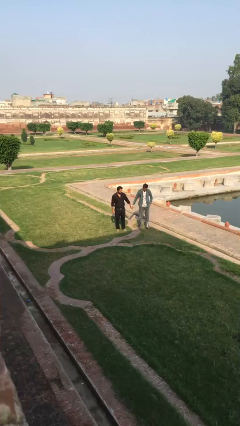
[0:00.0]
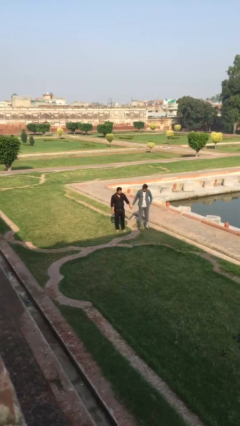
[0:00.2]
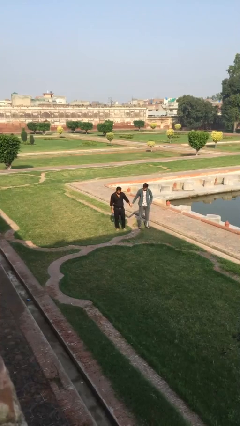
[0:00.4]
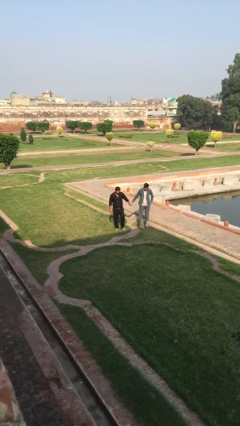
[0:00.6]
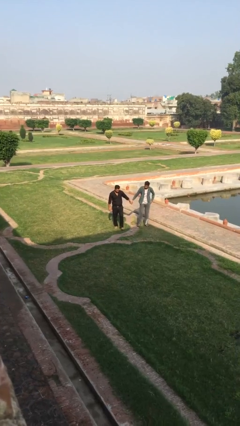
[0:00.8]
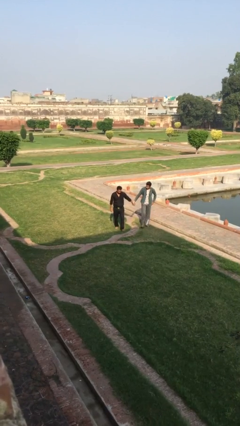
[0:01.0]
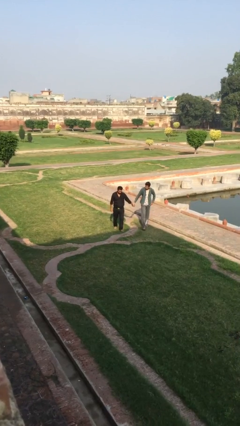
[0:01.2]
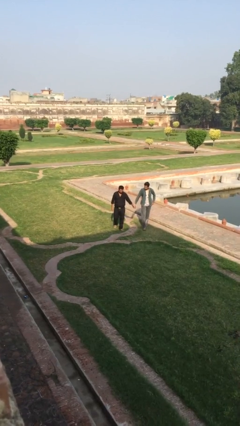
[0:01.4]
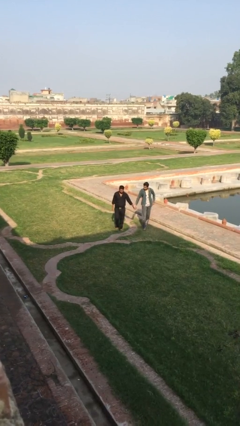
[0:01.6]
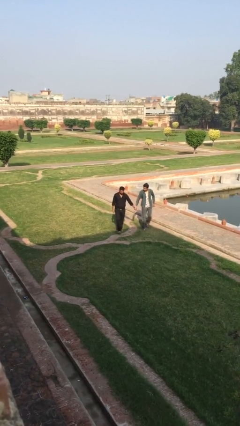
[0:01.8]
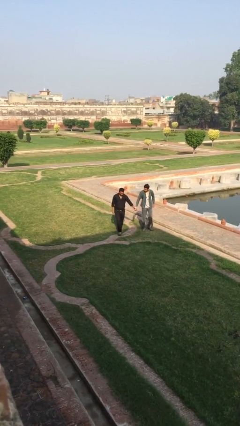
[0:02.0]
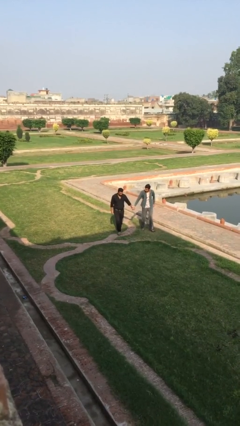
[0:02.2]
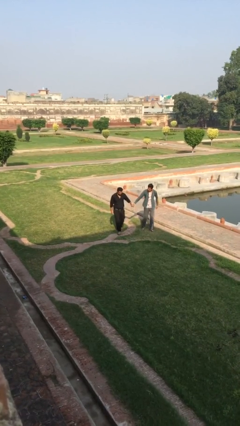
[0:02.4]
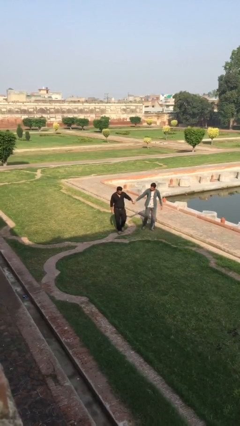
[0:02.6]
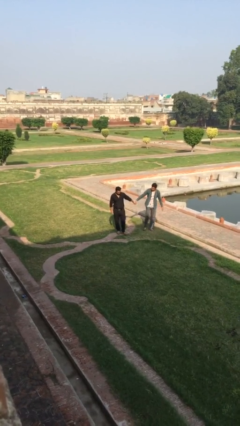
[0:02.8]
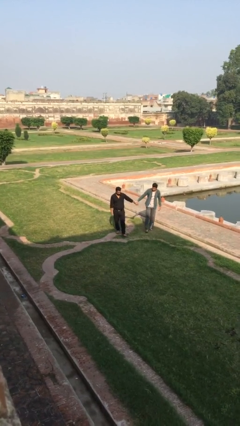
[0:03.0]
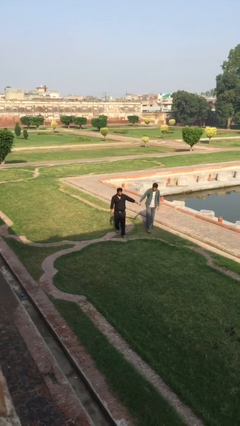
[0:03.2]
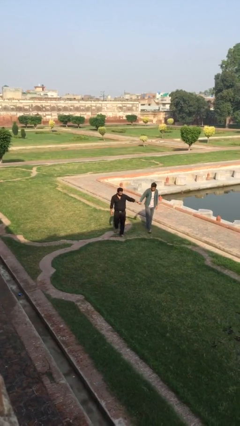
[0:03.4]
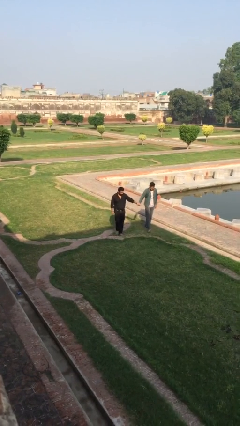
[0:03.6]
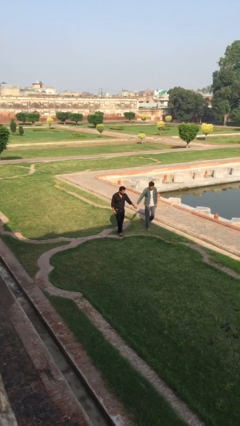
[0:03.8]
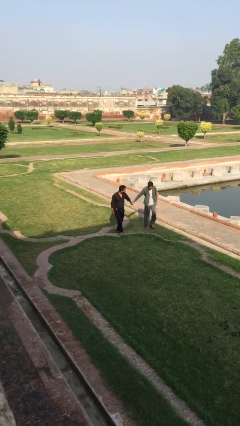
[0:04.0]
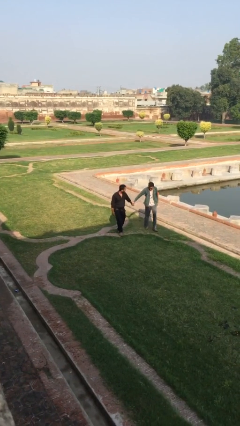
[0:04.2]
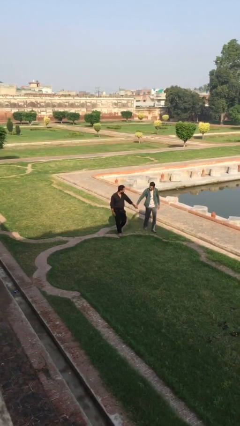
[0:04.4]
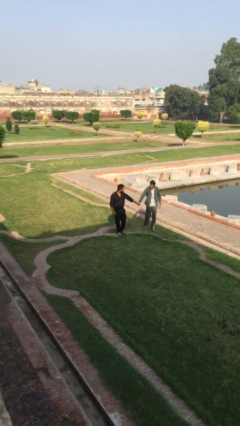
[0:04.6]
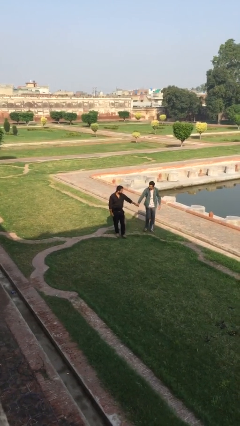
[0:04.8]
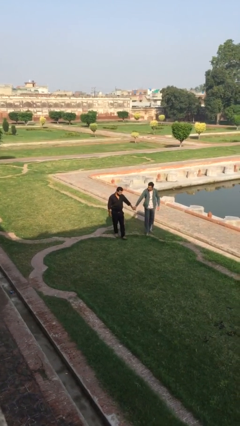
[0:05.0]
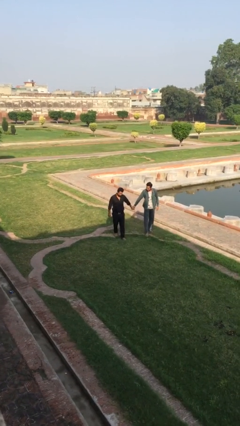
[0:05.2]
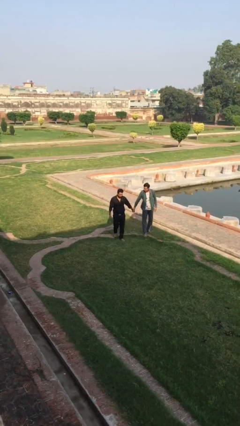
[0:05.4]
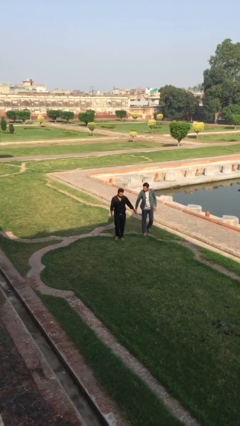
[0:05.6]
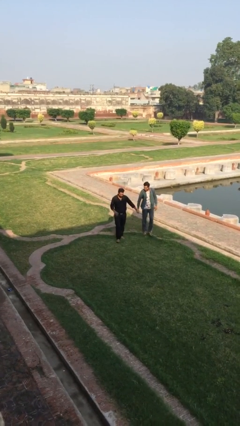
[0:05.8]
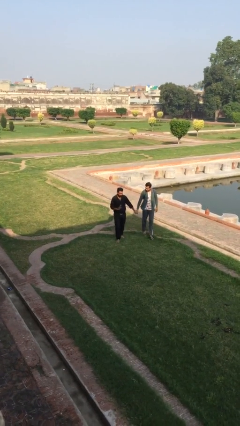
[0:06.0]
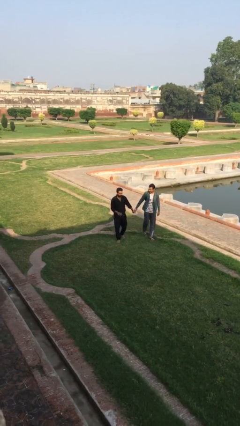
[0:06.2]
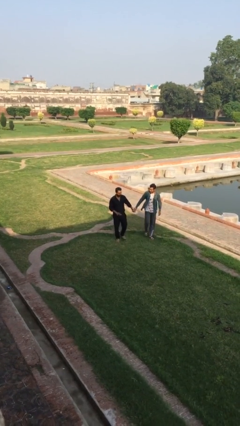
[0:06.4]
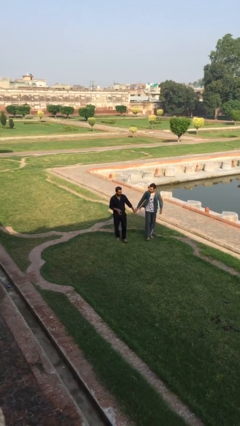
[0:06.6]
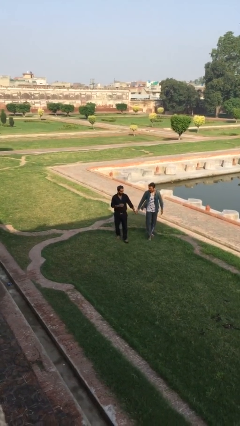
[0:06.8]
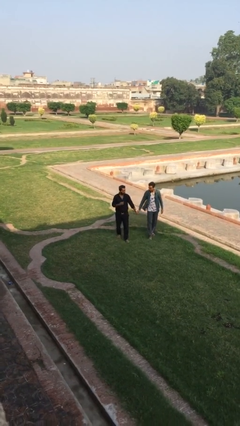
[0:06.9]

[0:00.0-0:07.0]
person holds hand

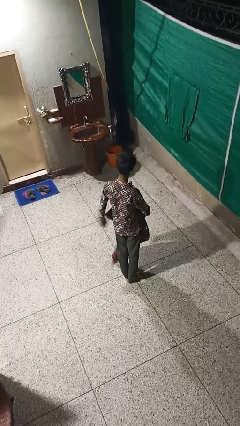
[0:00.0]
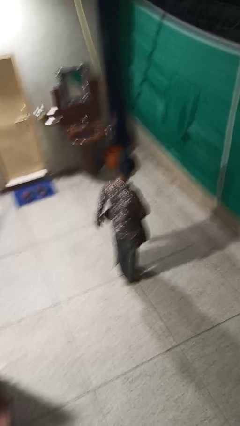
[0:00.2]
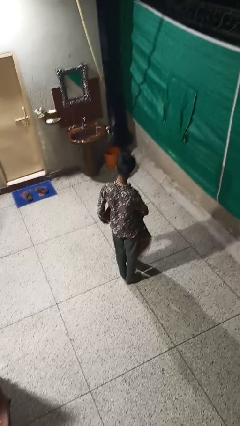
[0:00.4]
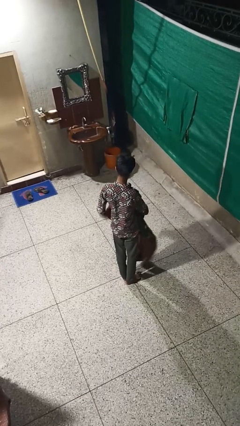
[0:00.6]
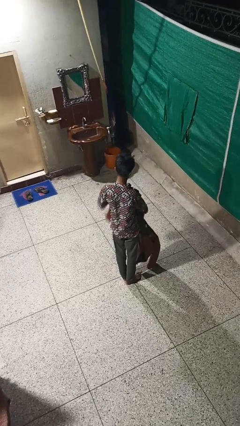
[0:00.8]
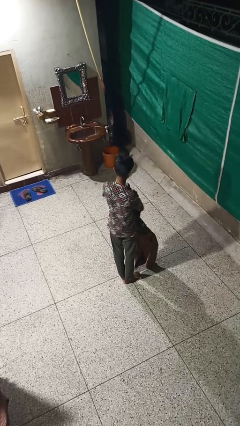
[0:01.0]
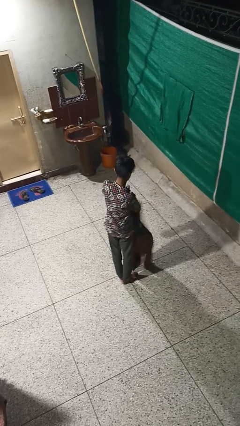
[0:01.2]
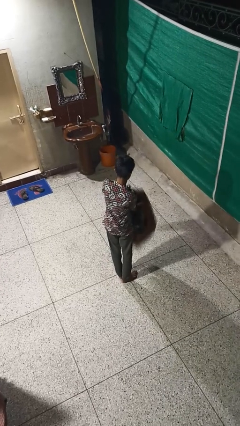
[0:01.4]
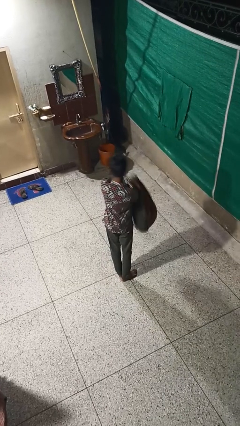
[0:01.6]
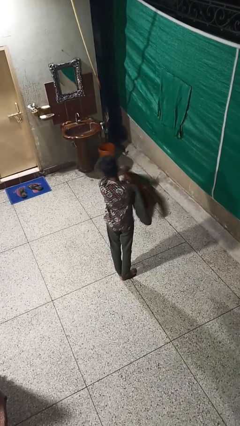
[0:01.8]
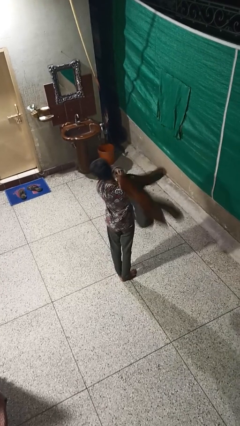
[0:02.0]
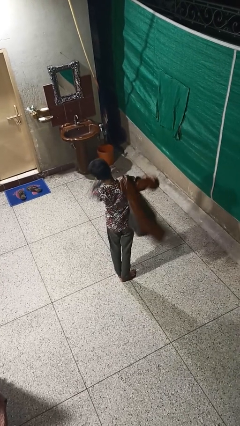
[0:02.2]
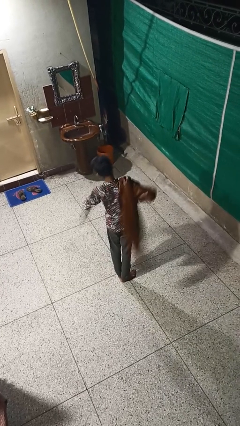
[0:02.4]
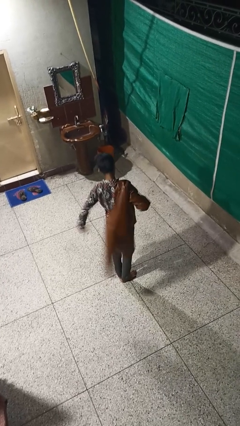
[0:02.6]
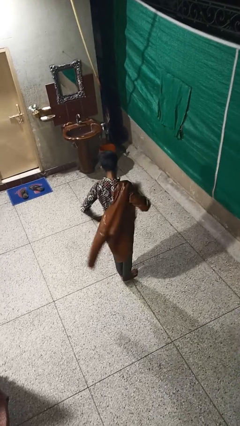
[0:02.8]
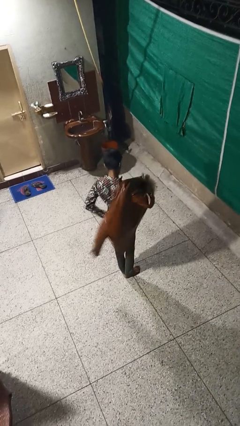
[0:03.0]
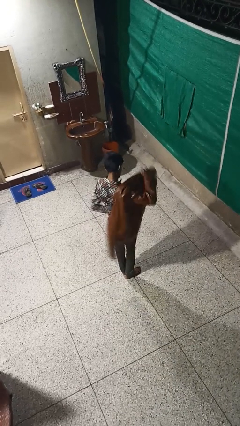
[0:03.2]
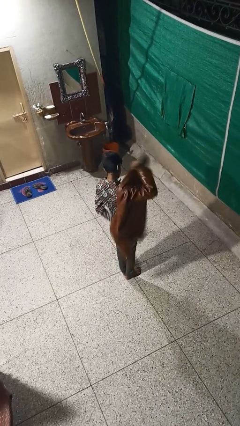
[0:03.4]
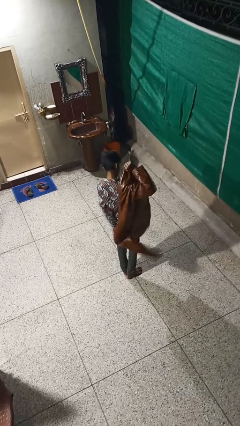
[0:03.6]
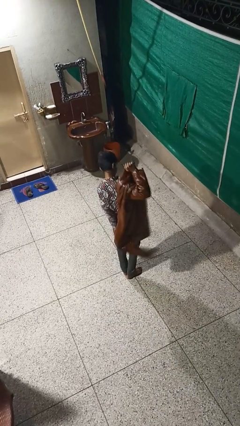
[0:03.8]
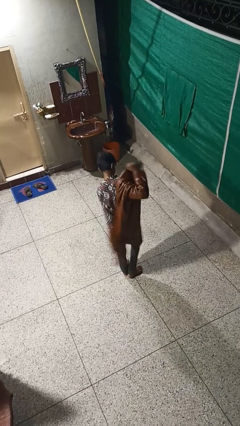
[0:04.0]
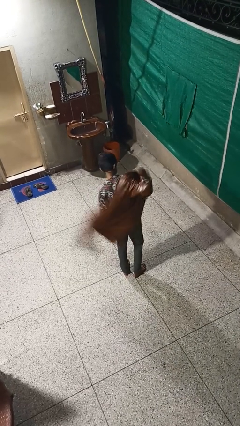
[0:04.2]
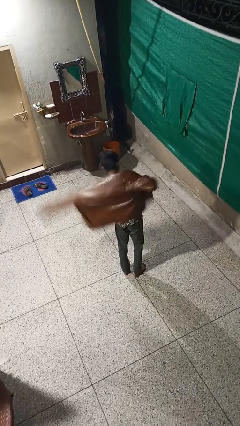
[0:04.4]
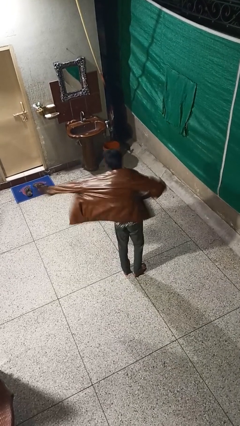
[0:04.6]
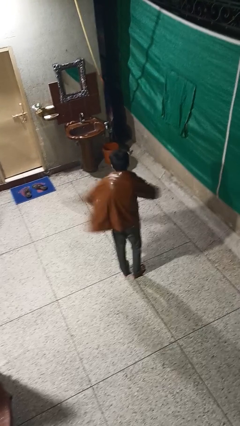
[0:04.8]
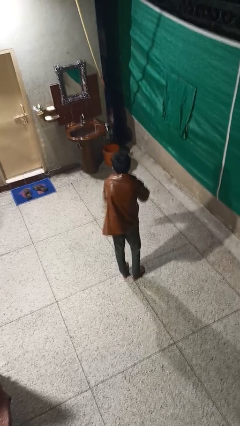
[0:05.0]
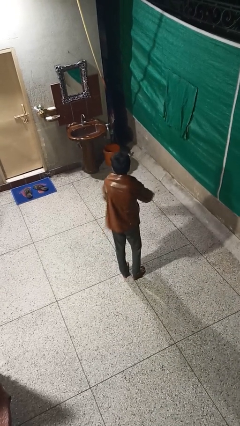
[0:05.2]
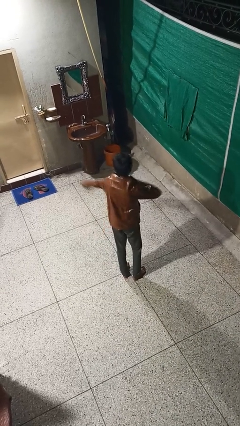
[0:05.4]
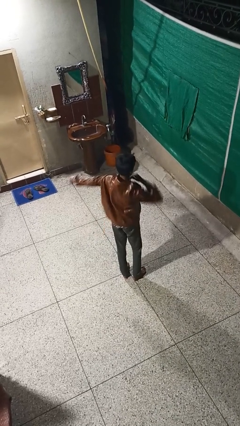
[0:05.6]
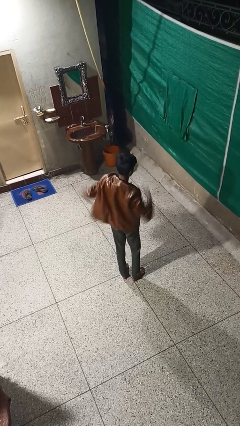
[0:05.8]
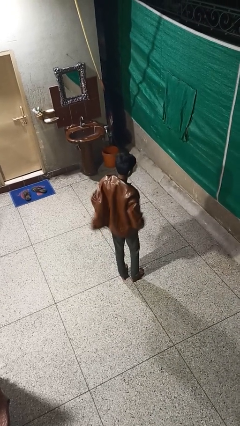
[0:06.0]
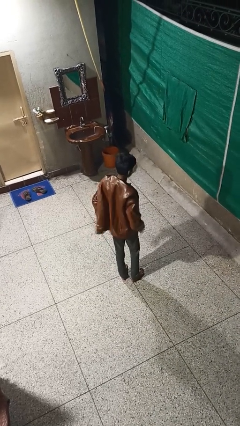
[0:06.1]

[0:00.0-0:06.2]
person puts on jacket

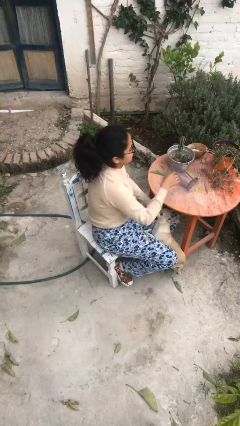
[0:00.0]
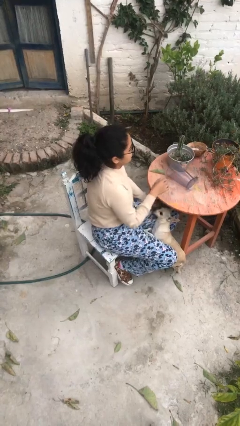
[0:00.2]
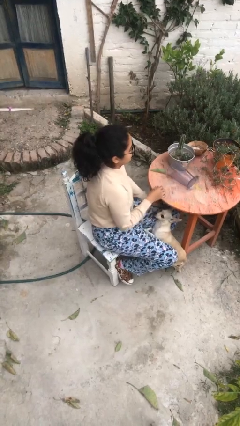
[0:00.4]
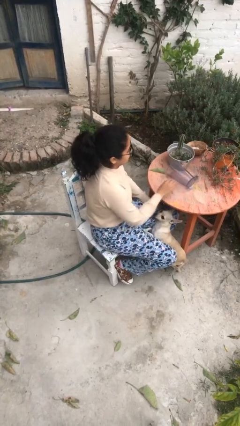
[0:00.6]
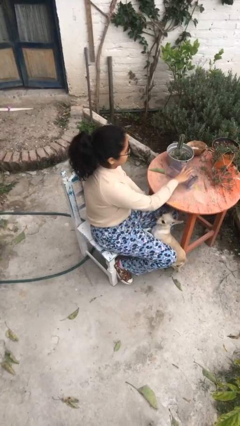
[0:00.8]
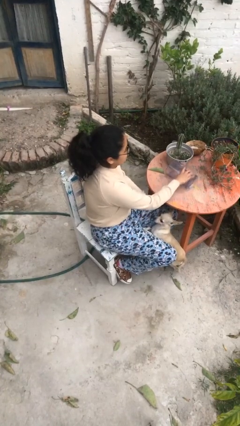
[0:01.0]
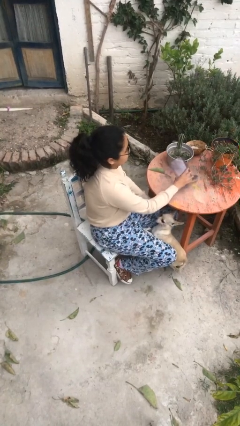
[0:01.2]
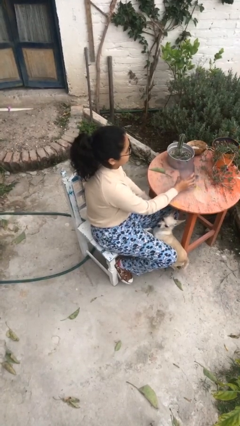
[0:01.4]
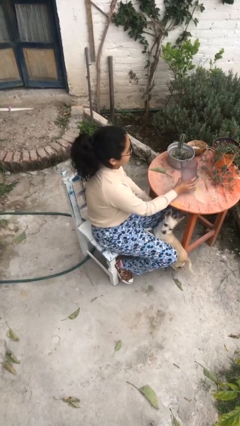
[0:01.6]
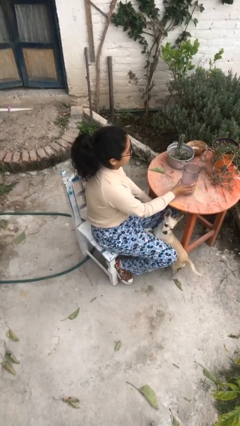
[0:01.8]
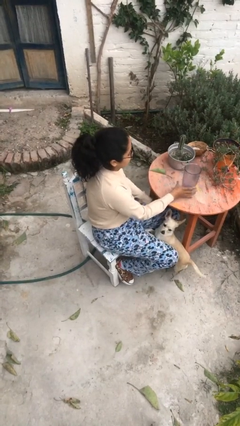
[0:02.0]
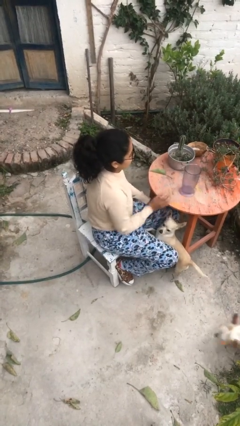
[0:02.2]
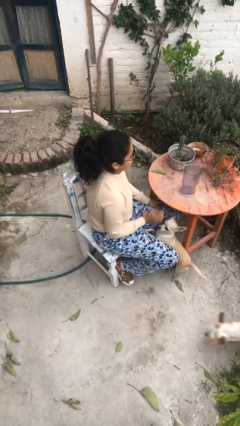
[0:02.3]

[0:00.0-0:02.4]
person sets upright glass

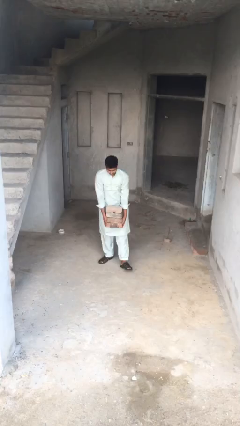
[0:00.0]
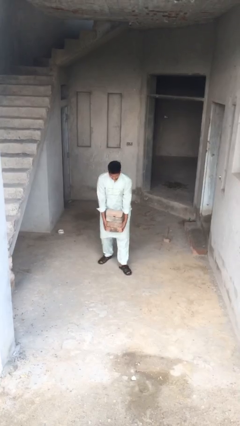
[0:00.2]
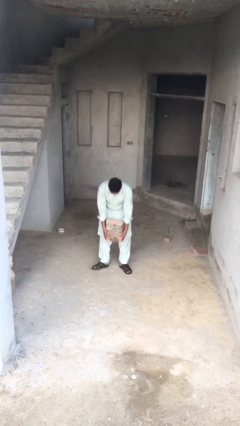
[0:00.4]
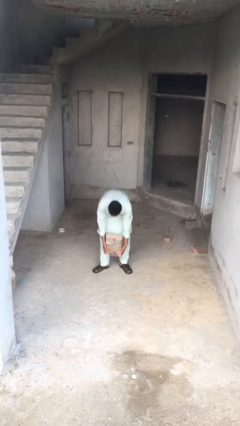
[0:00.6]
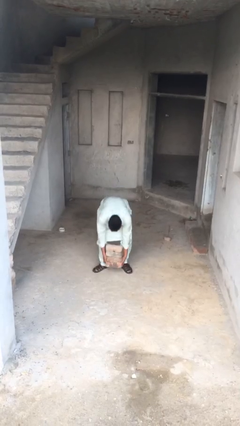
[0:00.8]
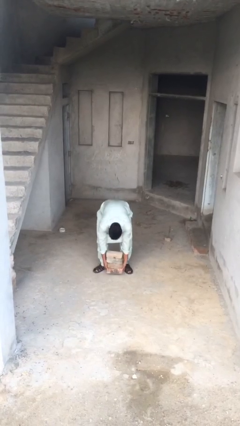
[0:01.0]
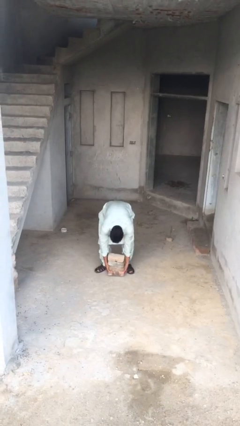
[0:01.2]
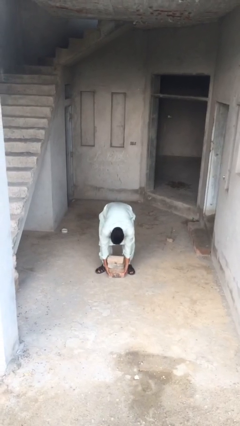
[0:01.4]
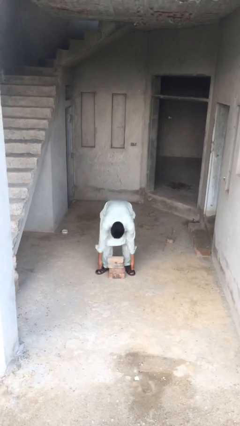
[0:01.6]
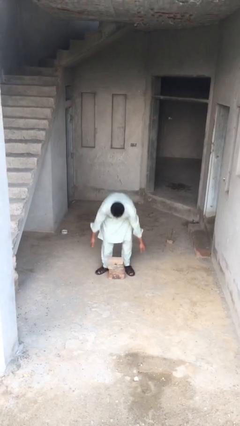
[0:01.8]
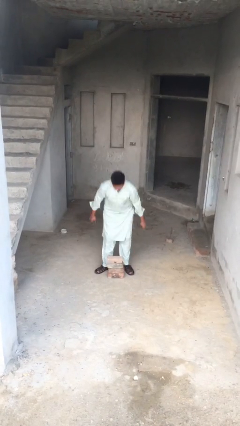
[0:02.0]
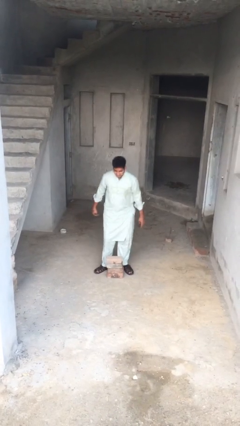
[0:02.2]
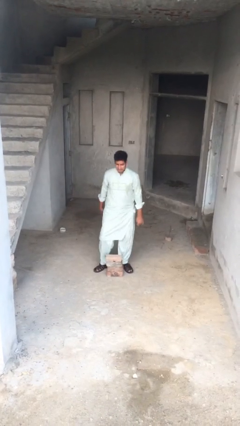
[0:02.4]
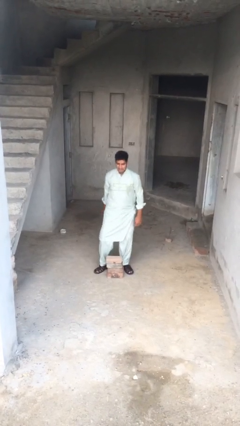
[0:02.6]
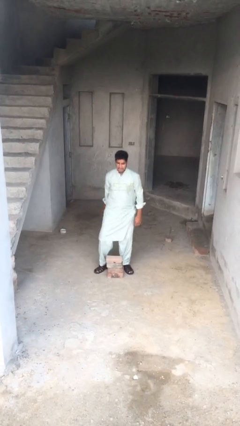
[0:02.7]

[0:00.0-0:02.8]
person puts down object on floor
